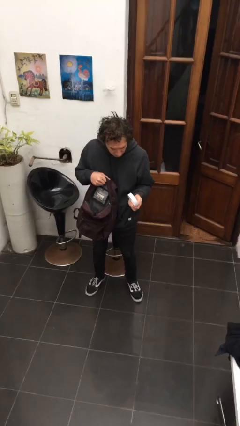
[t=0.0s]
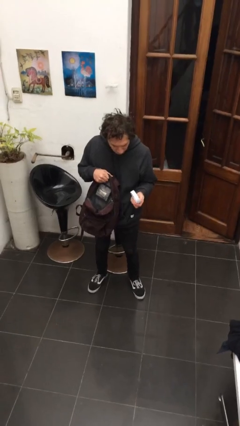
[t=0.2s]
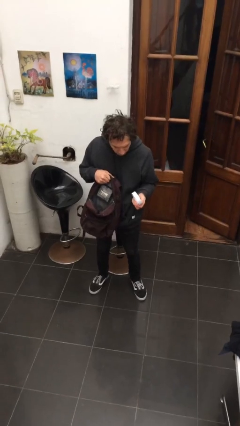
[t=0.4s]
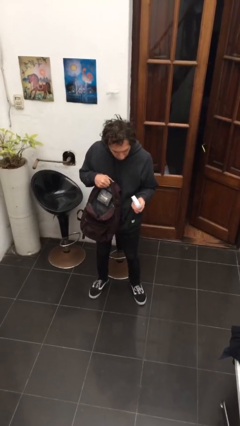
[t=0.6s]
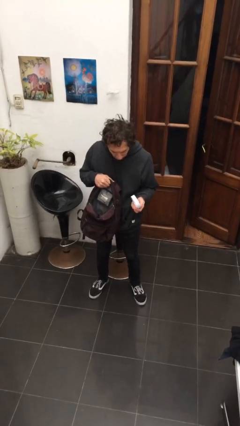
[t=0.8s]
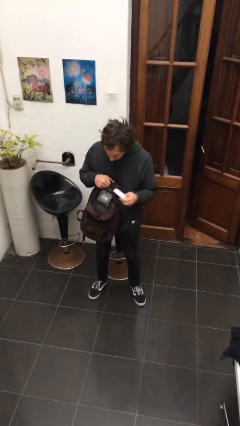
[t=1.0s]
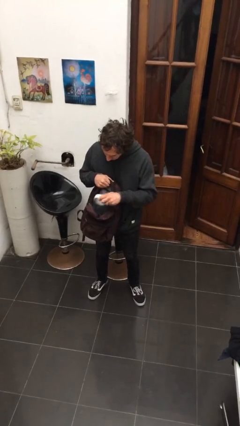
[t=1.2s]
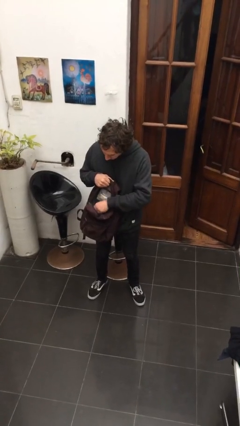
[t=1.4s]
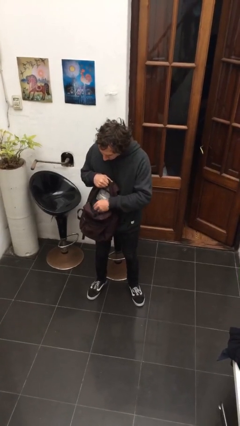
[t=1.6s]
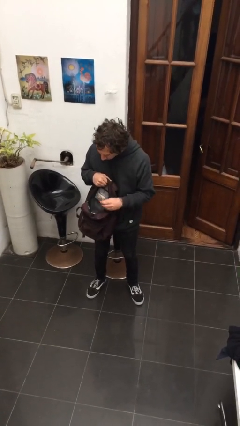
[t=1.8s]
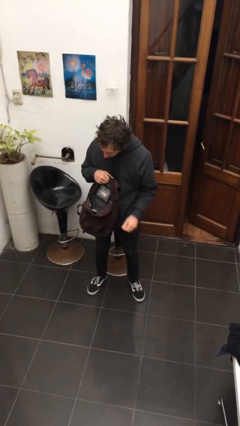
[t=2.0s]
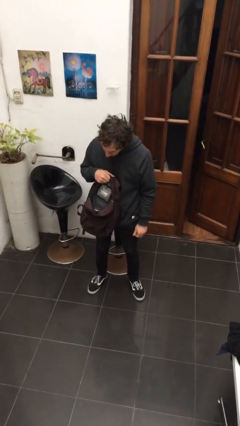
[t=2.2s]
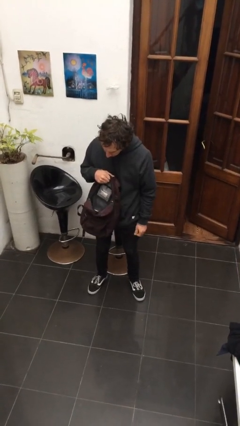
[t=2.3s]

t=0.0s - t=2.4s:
person puts object into backpack

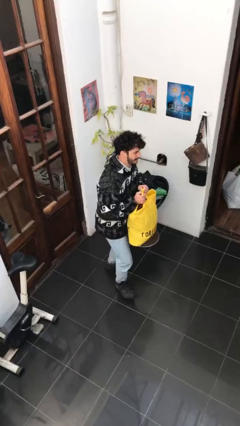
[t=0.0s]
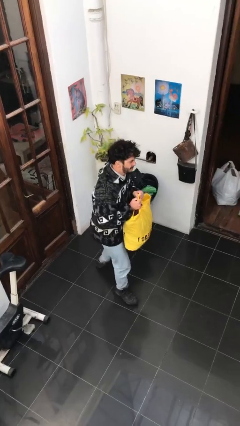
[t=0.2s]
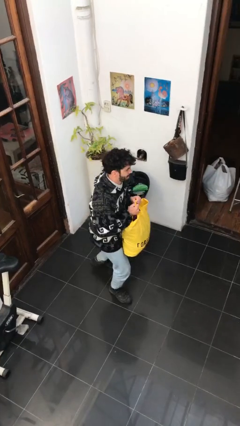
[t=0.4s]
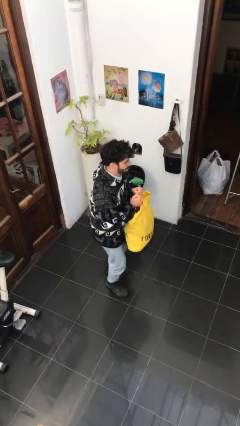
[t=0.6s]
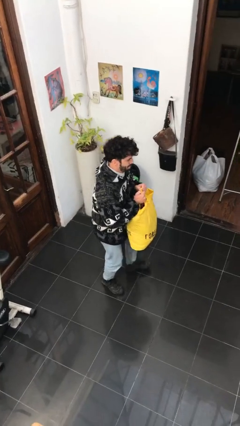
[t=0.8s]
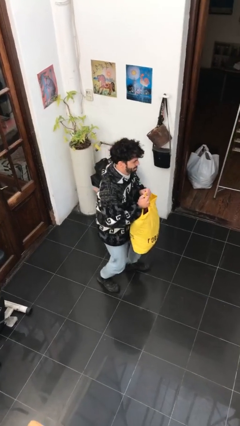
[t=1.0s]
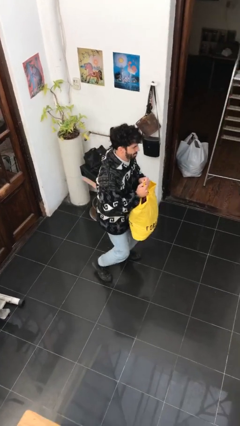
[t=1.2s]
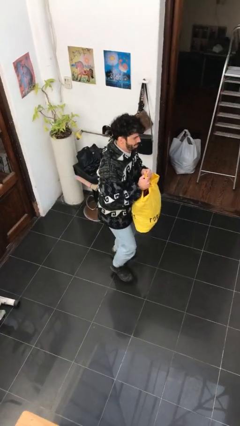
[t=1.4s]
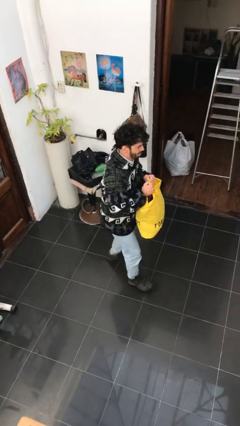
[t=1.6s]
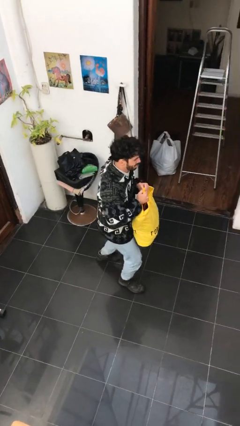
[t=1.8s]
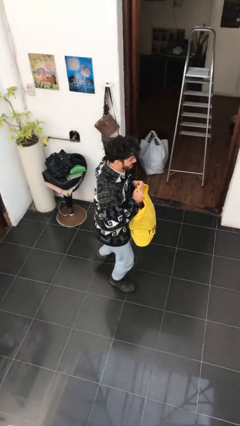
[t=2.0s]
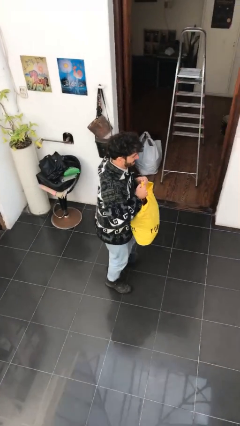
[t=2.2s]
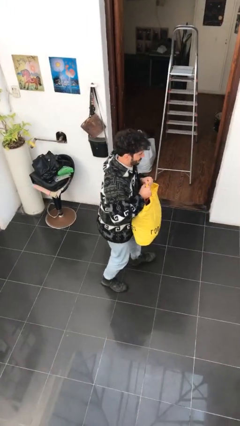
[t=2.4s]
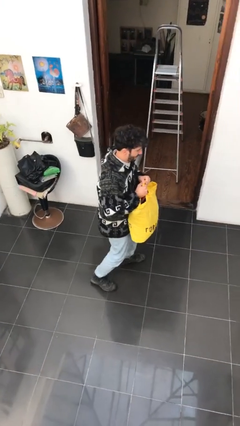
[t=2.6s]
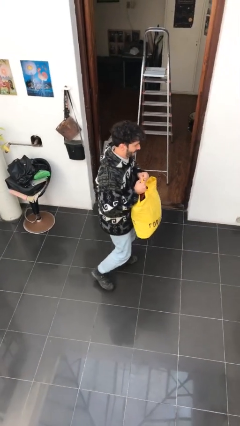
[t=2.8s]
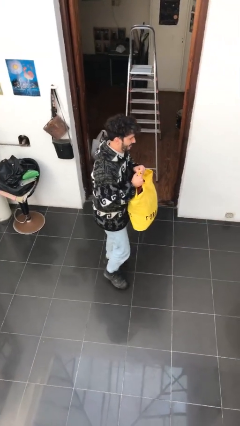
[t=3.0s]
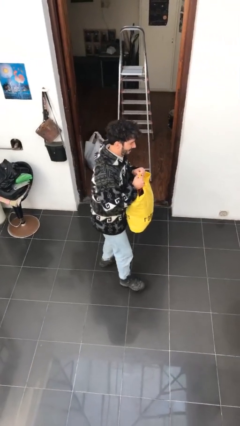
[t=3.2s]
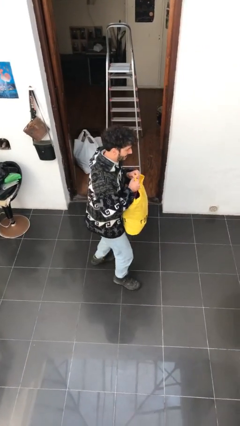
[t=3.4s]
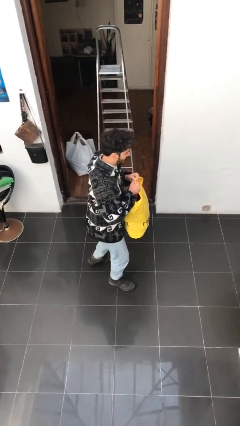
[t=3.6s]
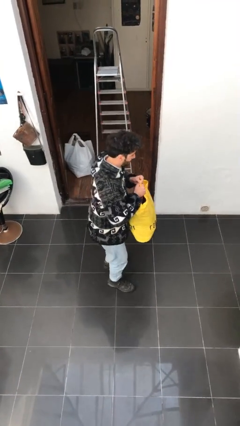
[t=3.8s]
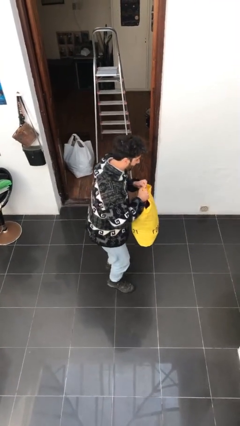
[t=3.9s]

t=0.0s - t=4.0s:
person carries heavy object

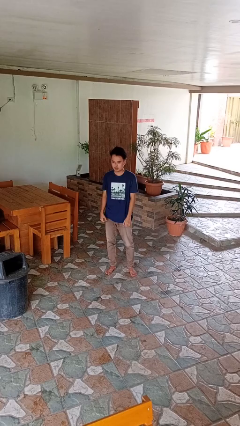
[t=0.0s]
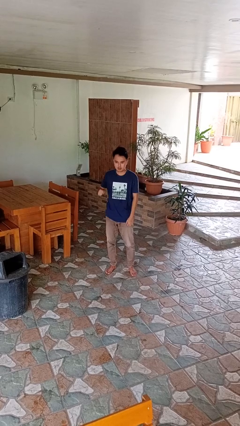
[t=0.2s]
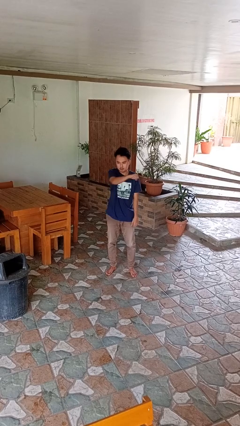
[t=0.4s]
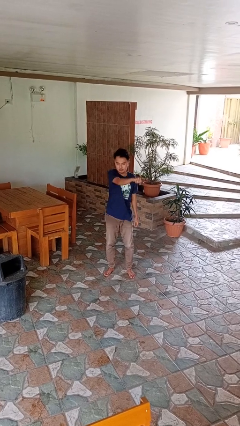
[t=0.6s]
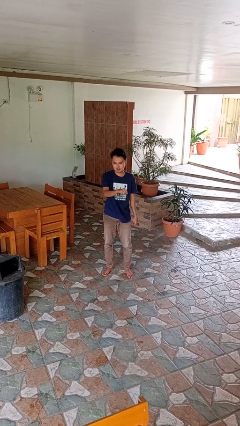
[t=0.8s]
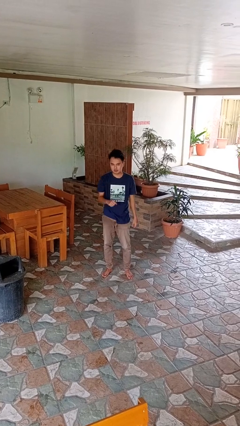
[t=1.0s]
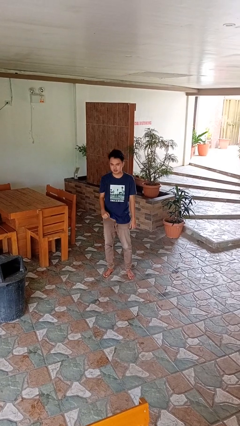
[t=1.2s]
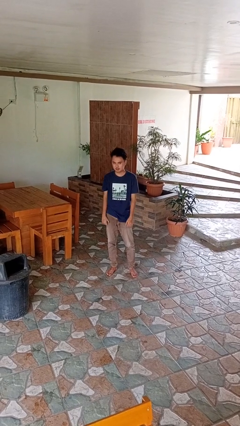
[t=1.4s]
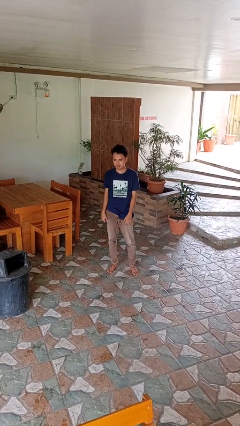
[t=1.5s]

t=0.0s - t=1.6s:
person punches

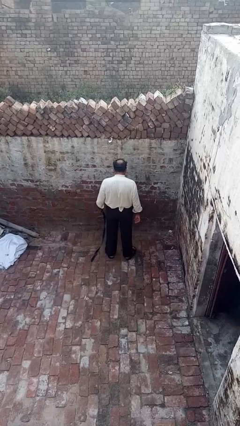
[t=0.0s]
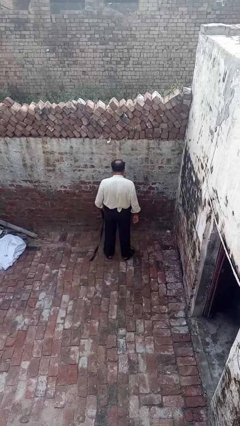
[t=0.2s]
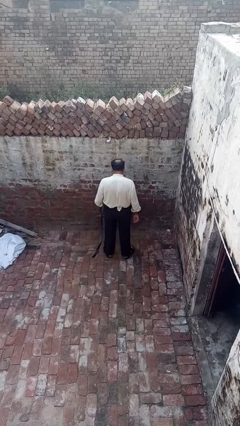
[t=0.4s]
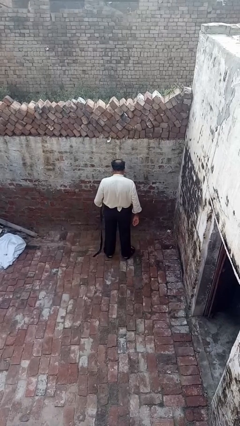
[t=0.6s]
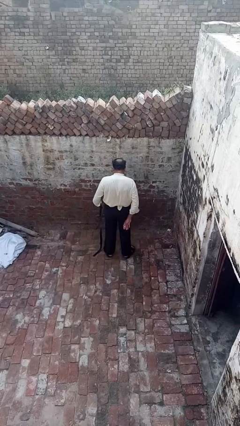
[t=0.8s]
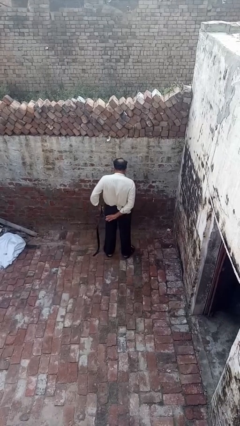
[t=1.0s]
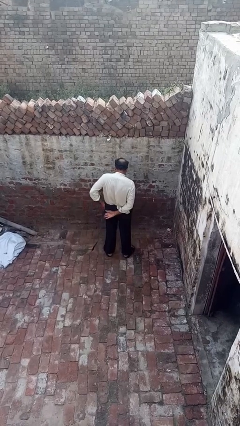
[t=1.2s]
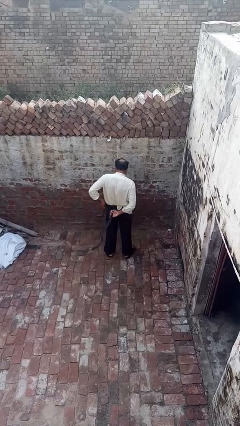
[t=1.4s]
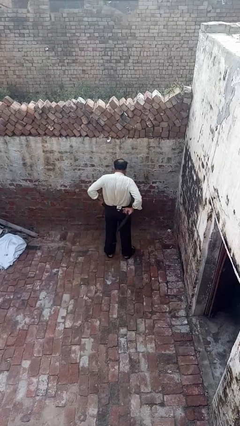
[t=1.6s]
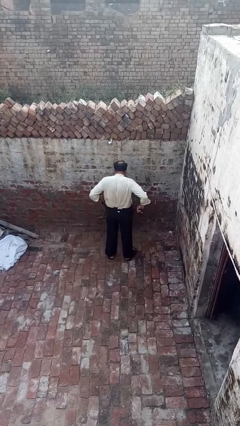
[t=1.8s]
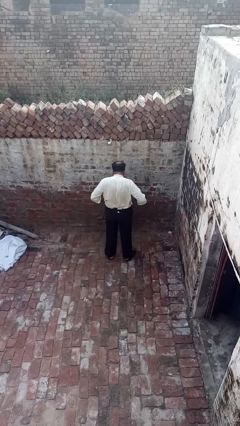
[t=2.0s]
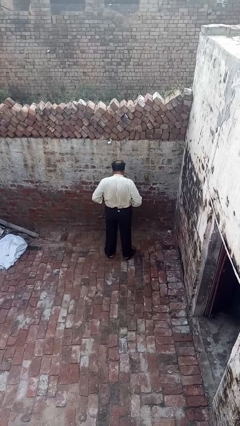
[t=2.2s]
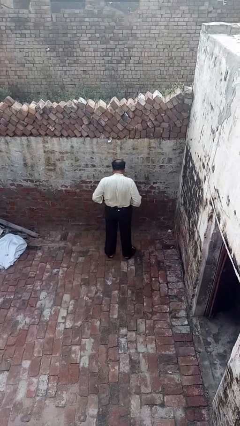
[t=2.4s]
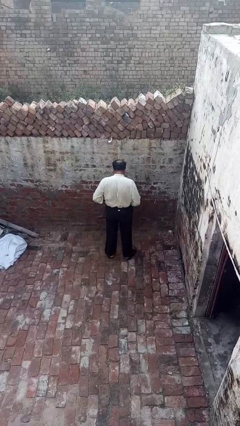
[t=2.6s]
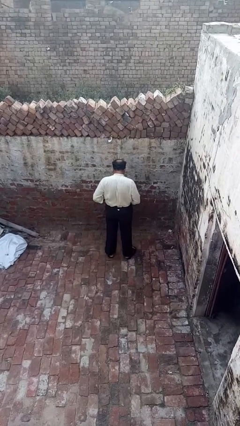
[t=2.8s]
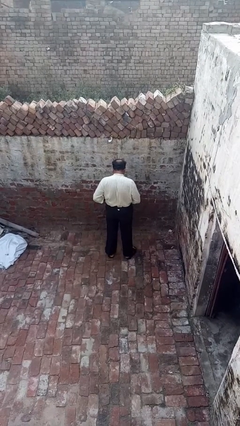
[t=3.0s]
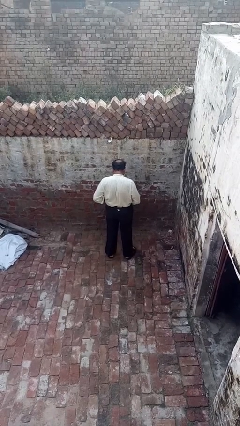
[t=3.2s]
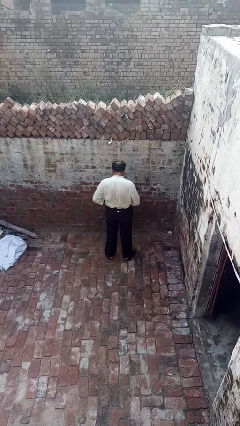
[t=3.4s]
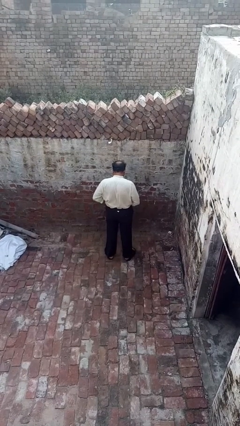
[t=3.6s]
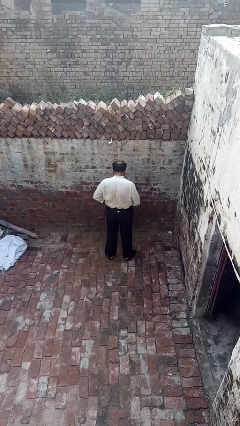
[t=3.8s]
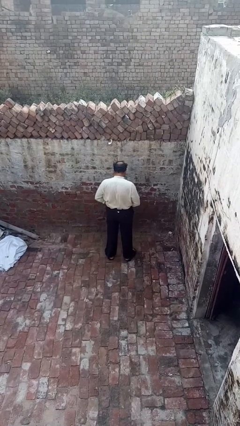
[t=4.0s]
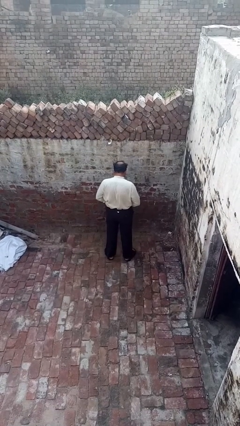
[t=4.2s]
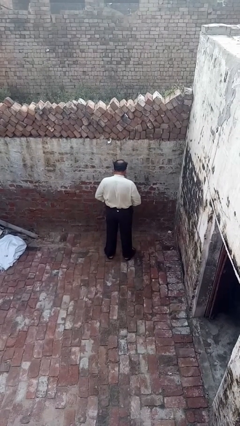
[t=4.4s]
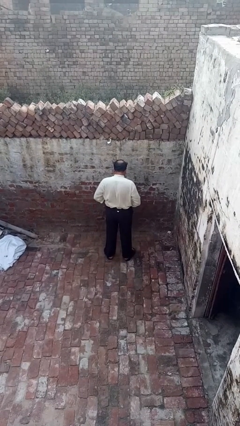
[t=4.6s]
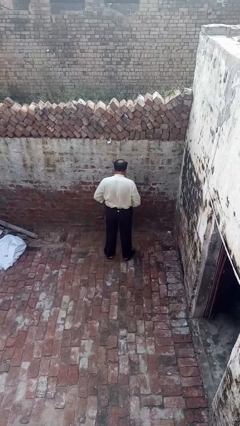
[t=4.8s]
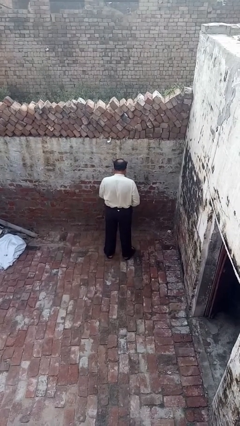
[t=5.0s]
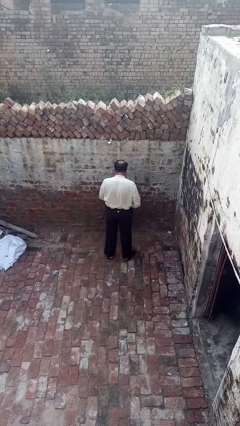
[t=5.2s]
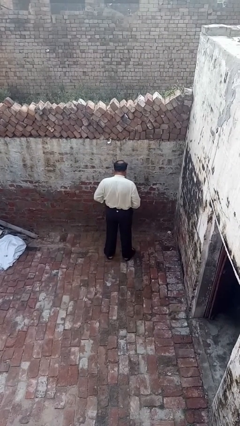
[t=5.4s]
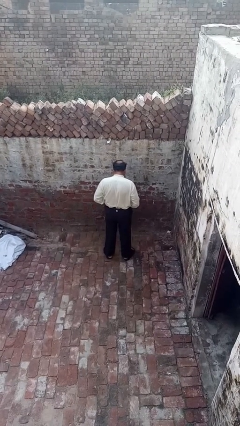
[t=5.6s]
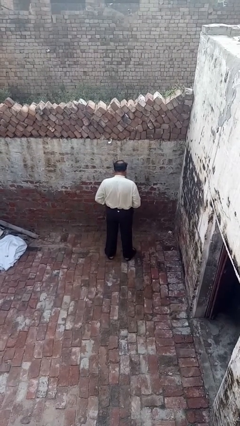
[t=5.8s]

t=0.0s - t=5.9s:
person puts on belt

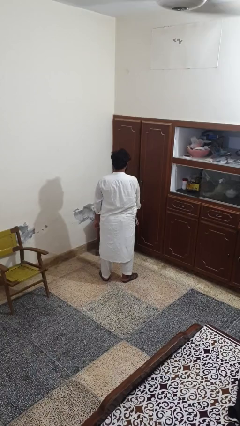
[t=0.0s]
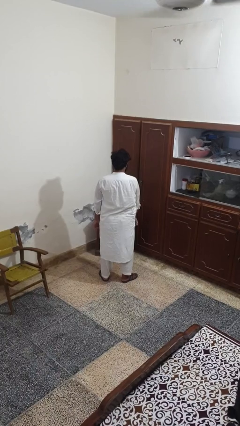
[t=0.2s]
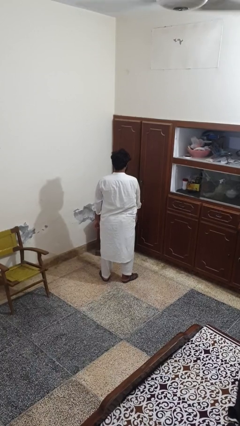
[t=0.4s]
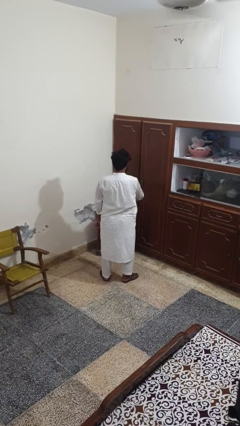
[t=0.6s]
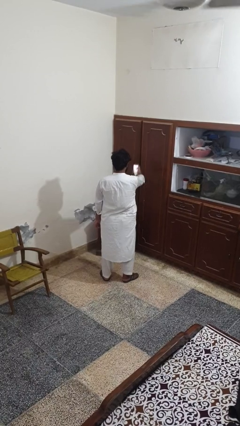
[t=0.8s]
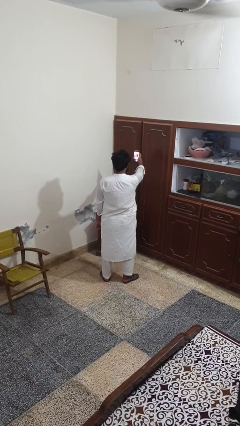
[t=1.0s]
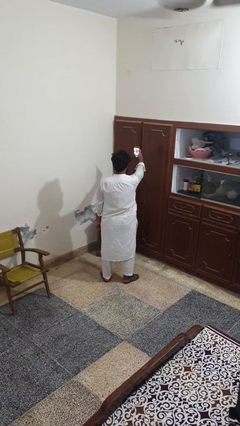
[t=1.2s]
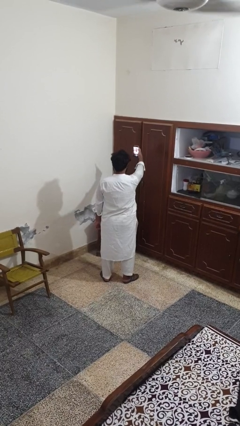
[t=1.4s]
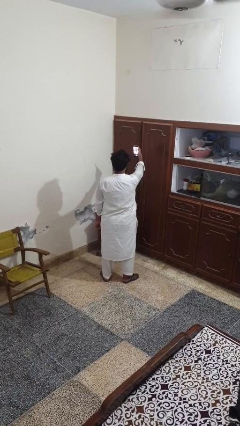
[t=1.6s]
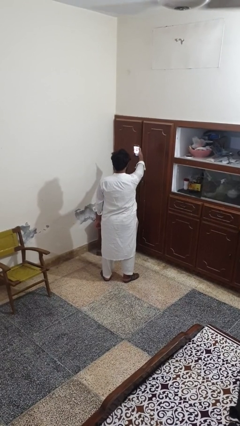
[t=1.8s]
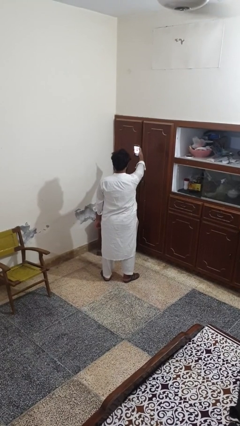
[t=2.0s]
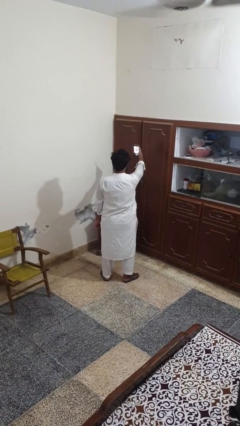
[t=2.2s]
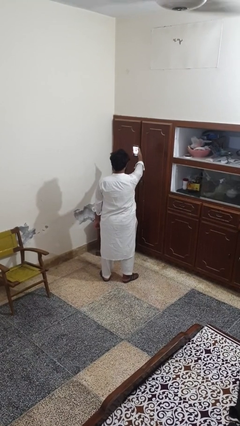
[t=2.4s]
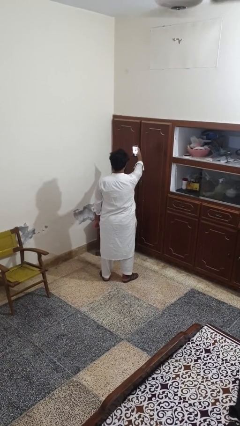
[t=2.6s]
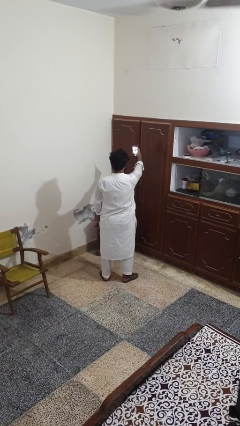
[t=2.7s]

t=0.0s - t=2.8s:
person takes selfie

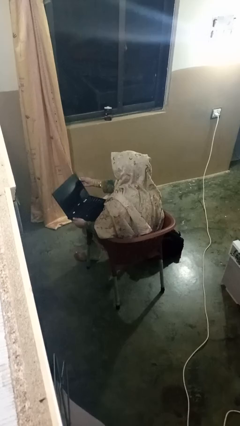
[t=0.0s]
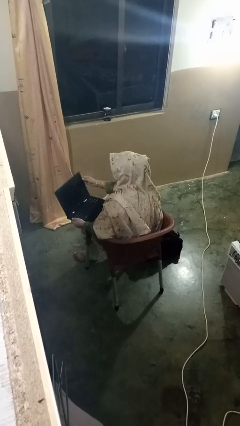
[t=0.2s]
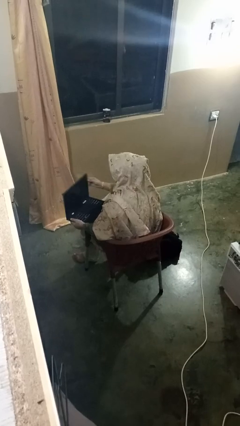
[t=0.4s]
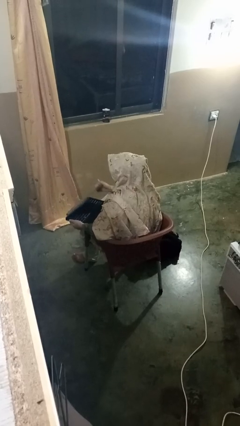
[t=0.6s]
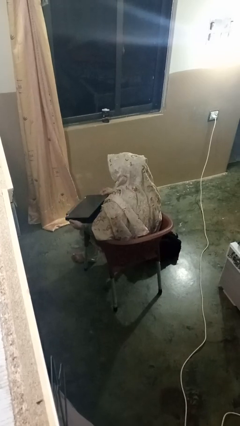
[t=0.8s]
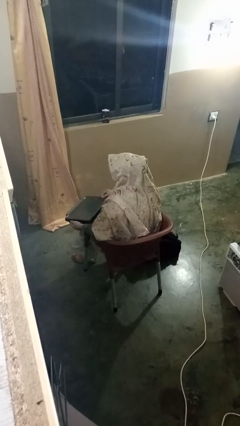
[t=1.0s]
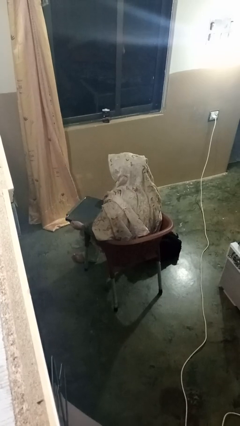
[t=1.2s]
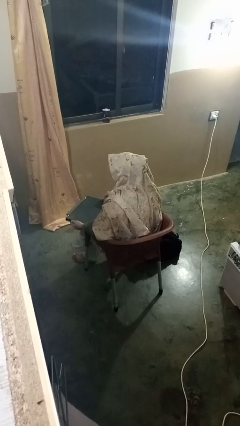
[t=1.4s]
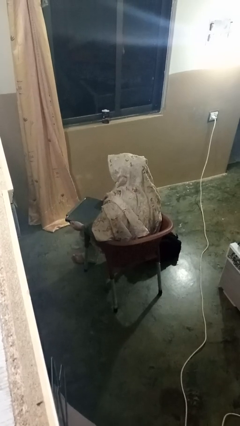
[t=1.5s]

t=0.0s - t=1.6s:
person closes laptop
